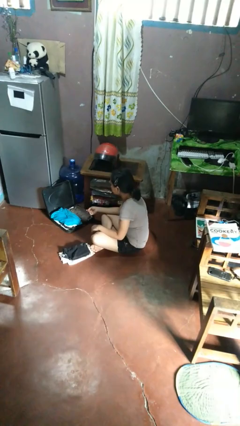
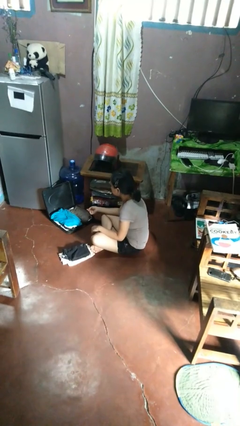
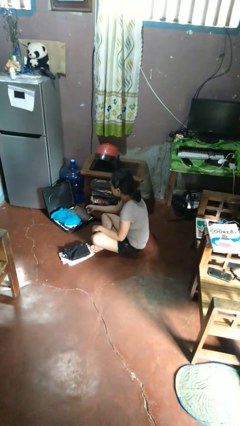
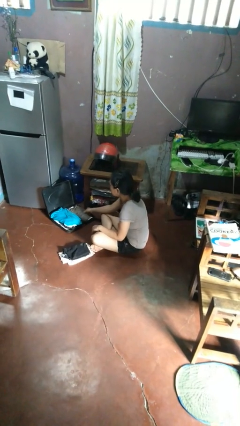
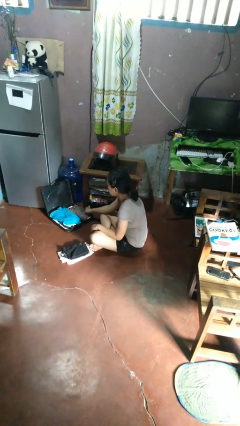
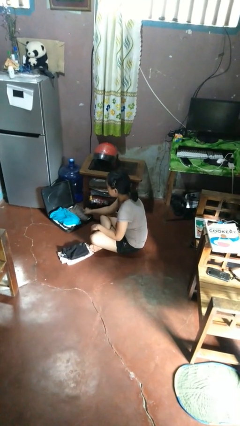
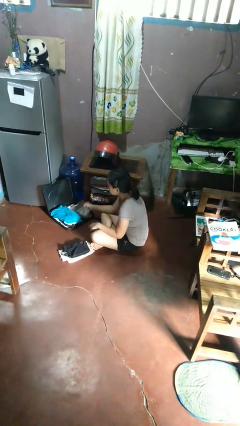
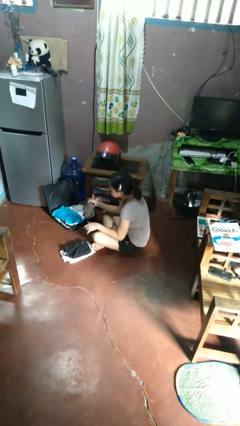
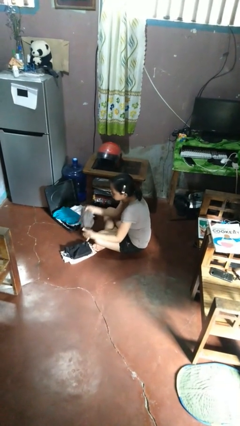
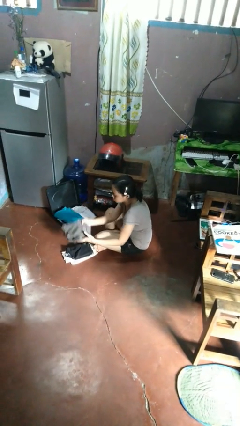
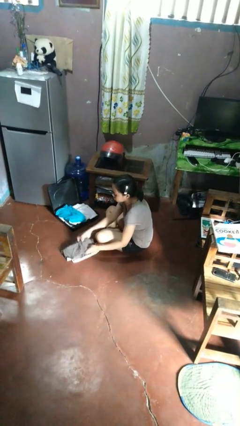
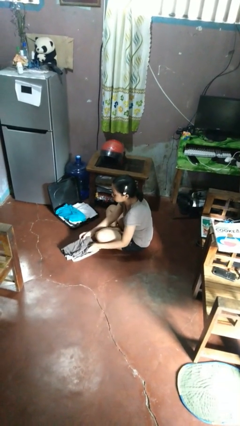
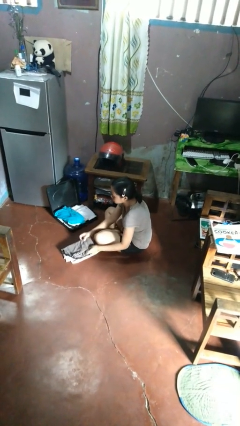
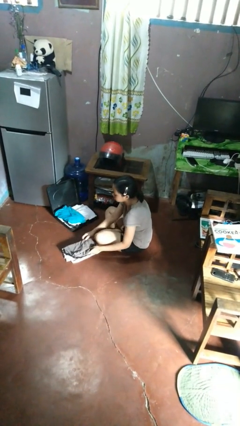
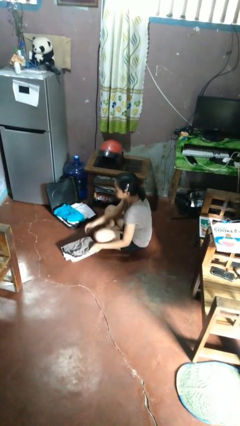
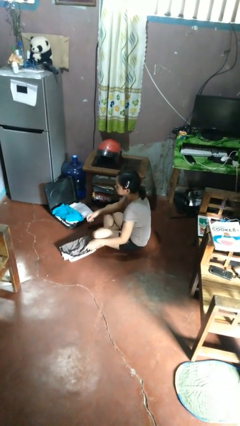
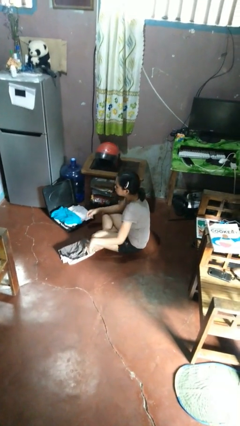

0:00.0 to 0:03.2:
person unloads clothes from suitcase

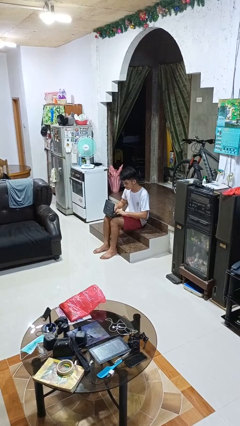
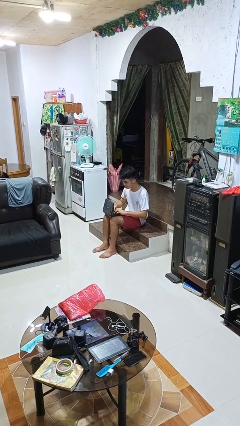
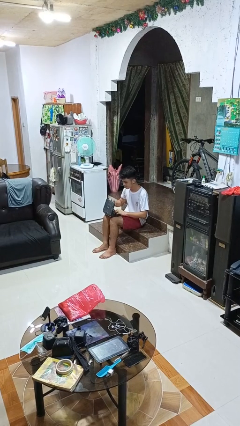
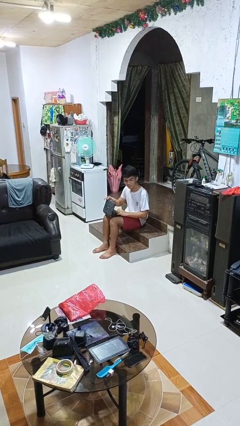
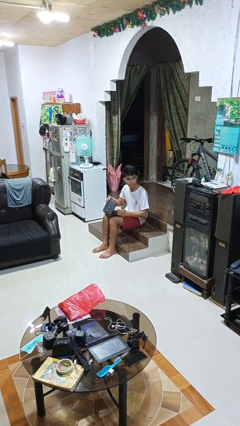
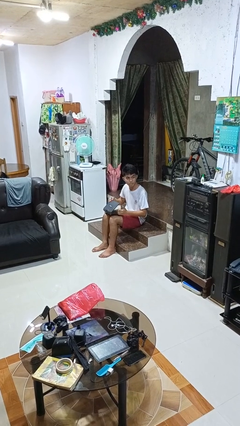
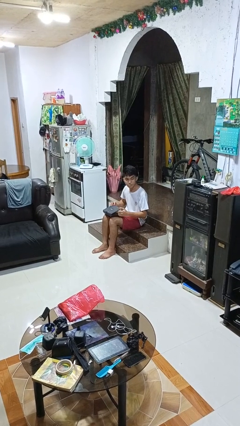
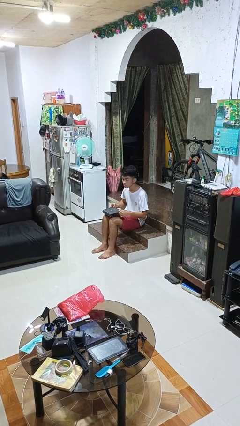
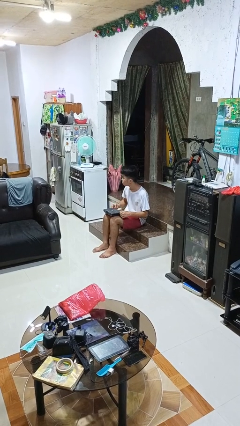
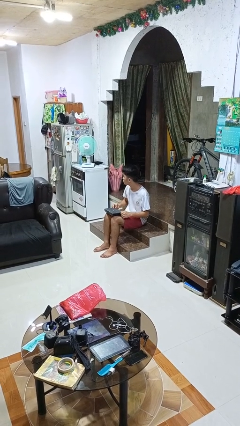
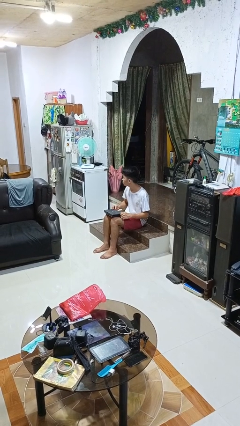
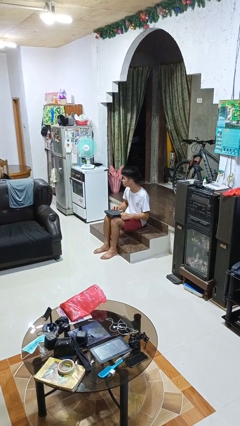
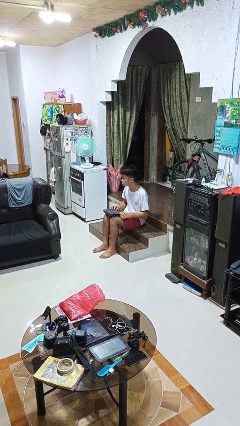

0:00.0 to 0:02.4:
person closes laptop

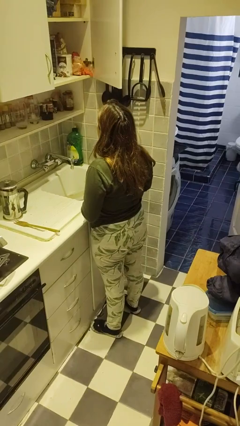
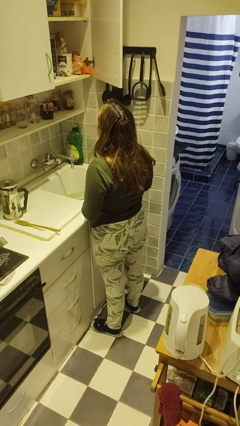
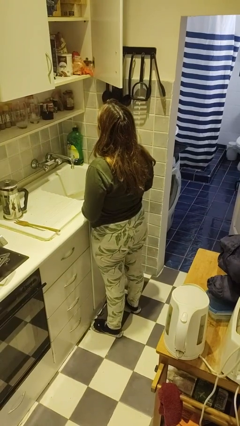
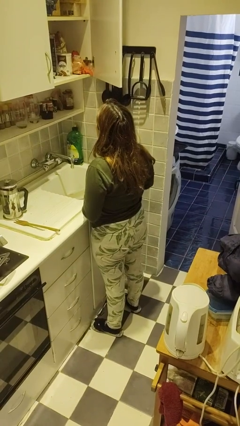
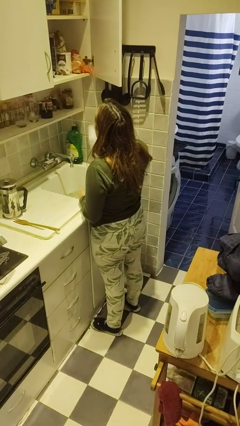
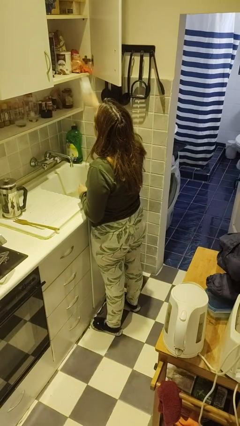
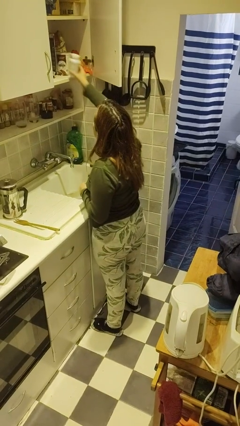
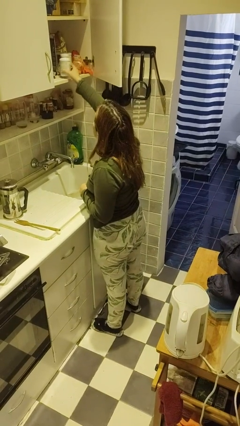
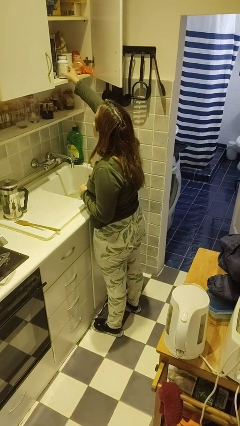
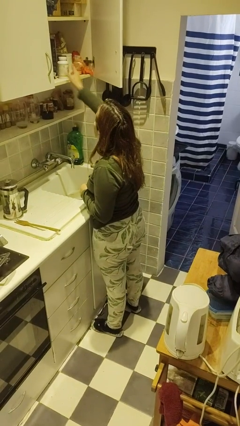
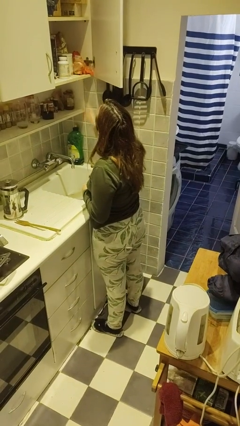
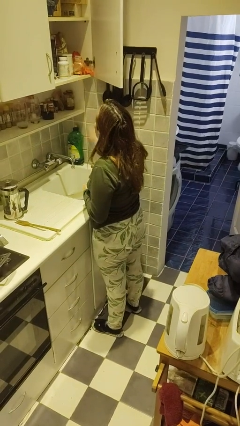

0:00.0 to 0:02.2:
person puts object in cabinet

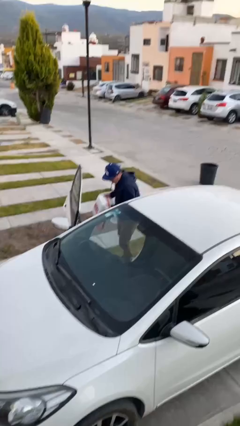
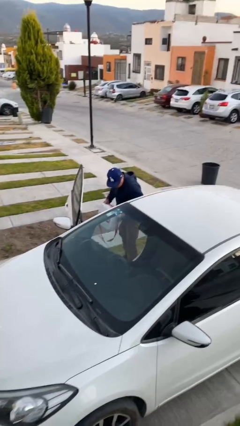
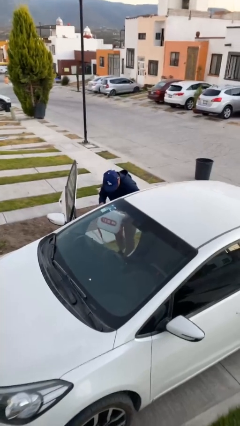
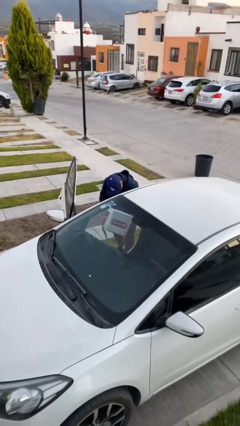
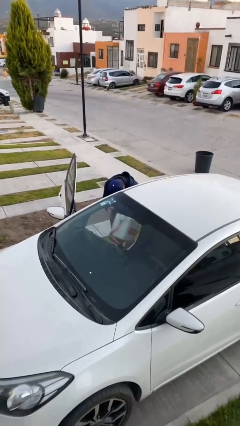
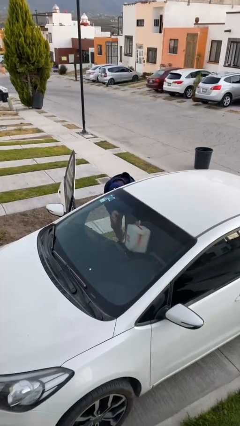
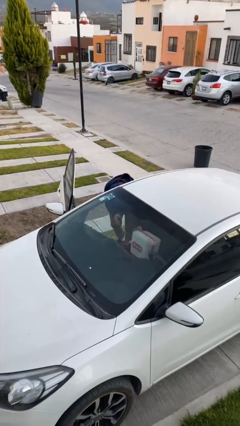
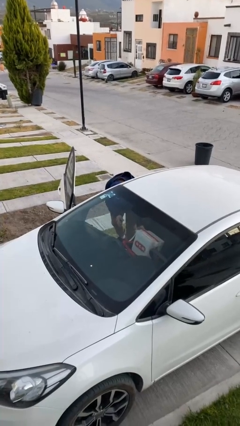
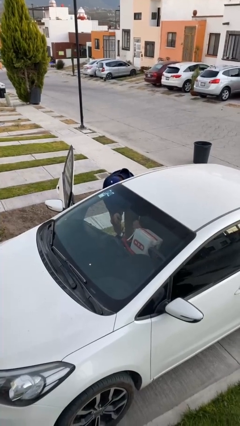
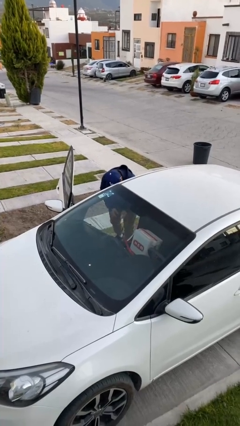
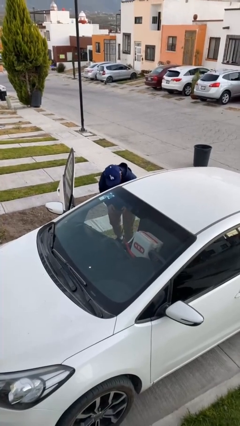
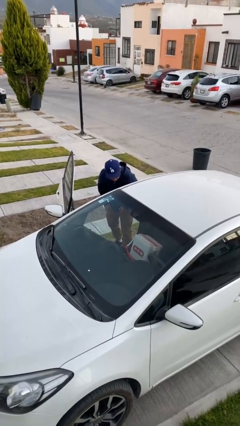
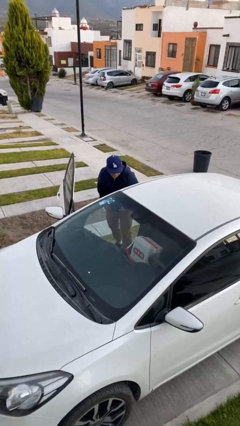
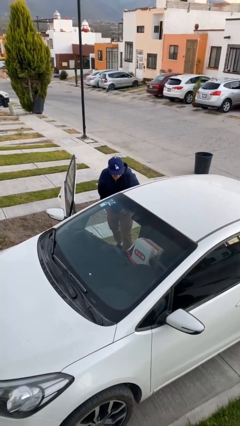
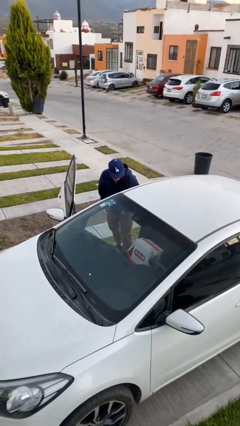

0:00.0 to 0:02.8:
person loads car

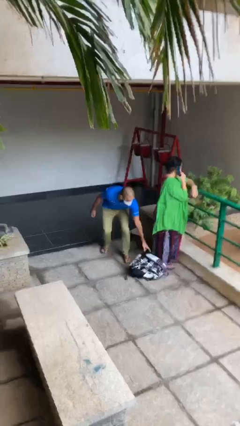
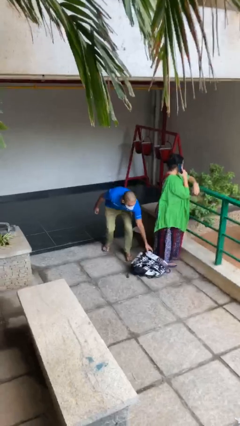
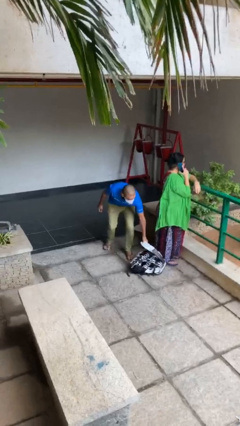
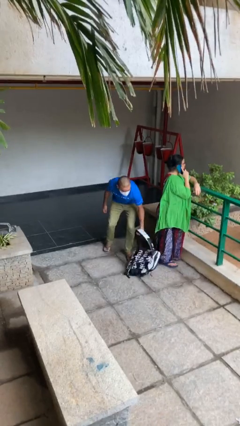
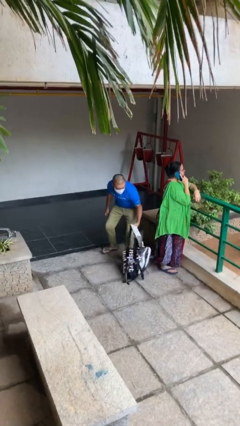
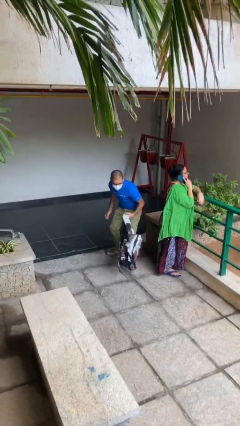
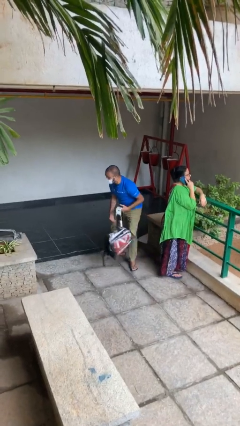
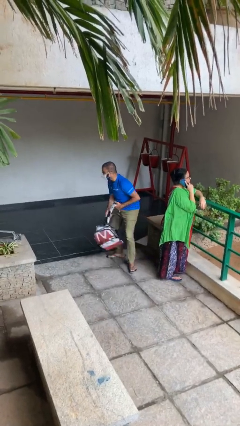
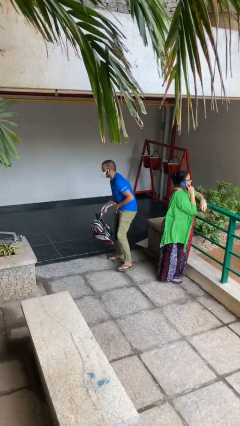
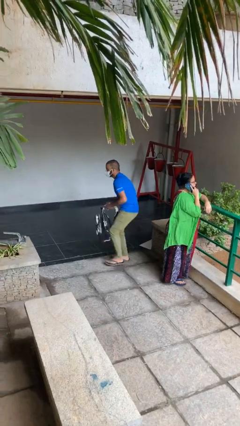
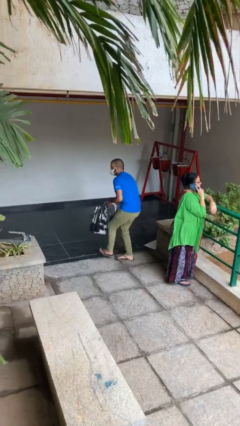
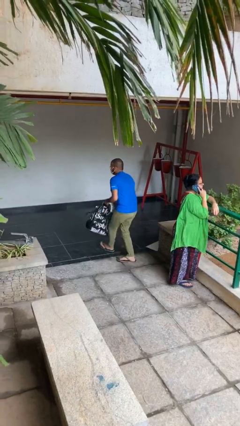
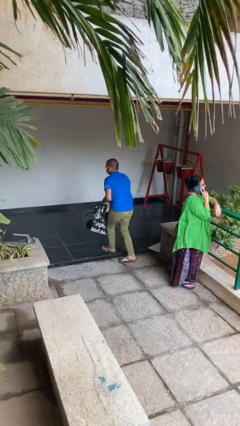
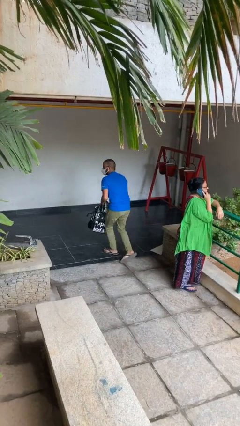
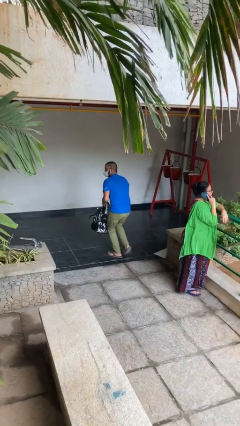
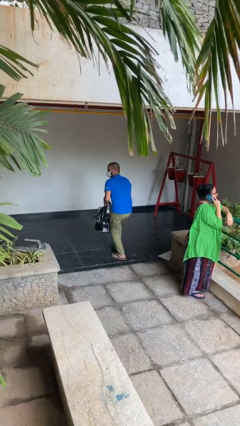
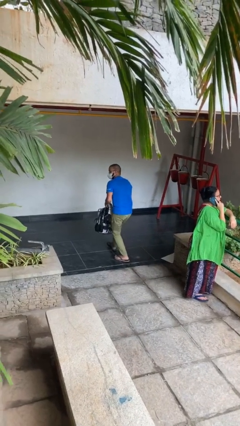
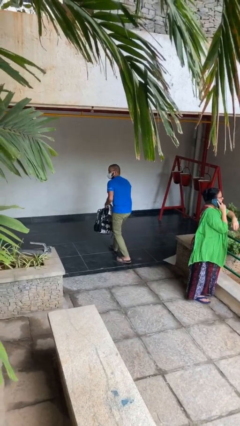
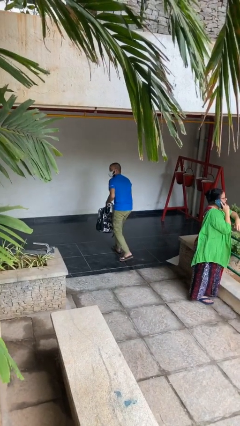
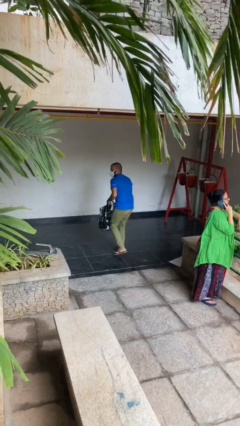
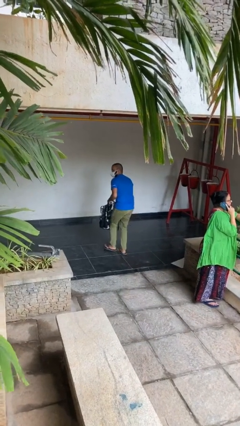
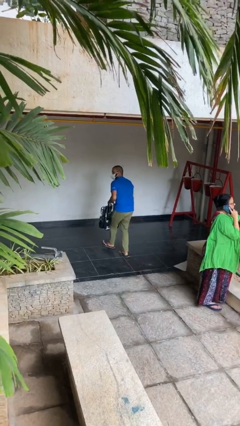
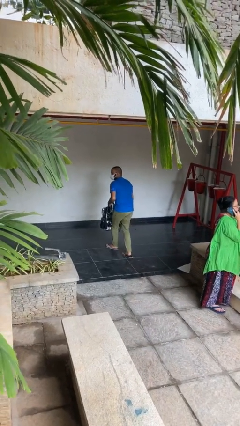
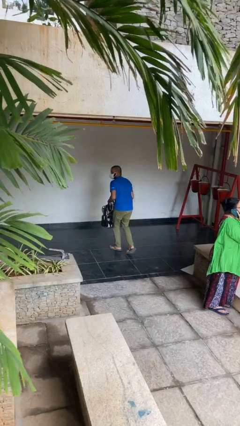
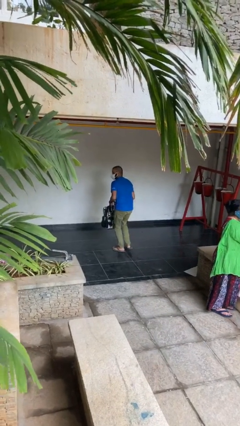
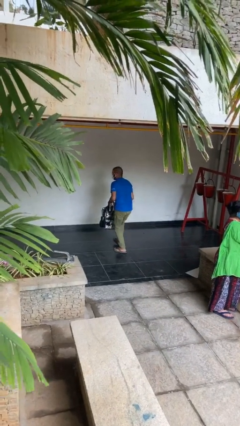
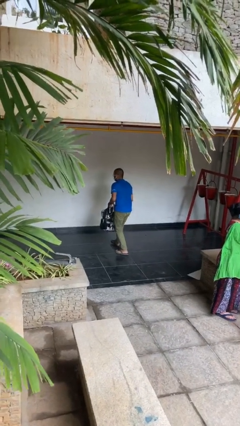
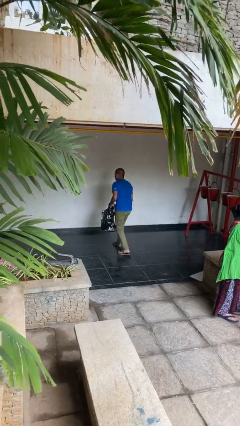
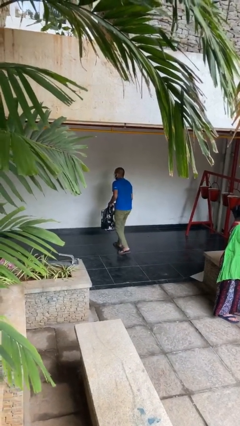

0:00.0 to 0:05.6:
person steals object from person

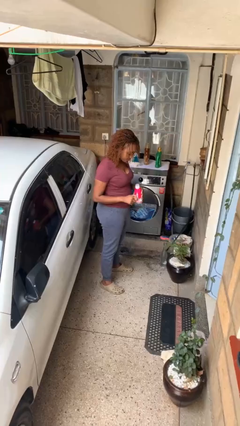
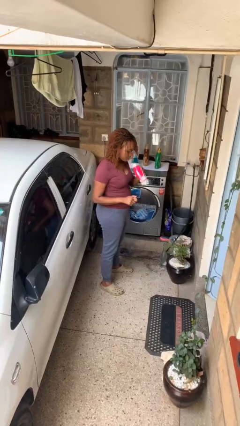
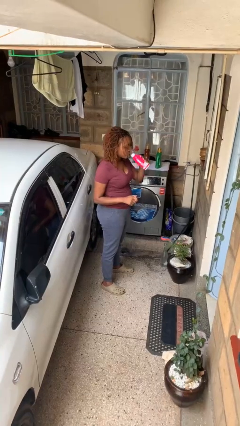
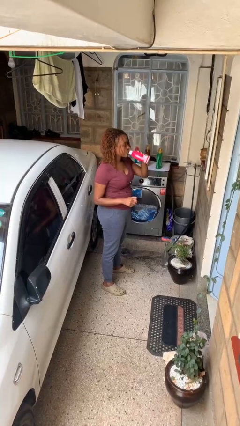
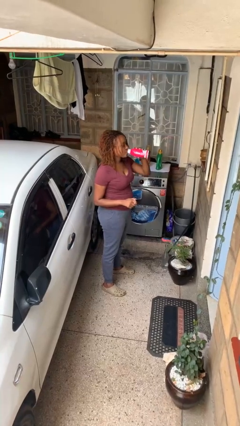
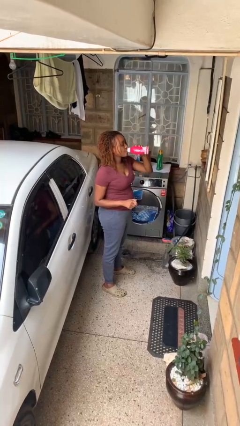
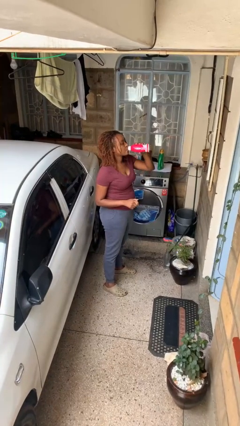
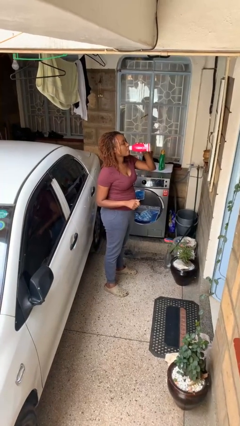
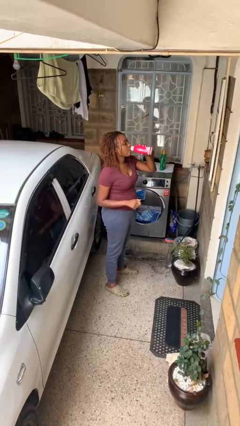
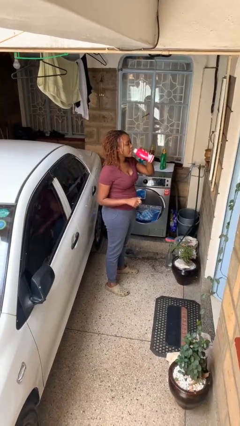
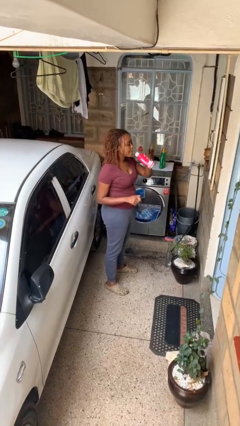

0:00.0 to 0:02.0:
person drinks from beverage can
